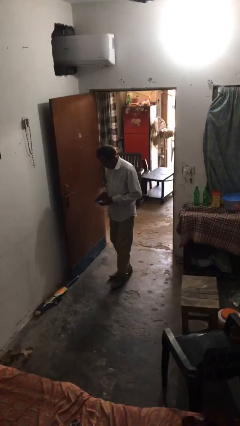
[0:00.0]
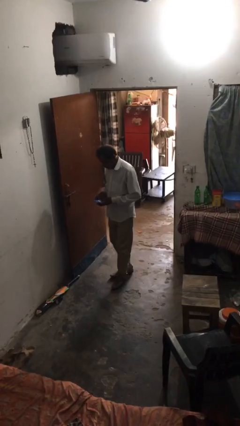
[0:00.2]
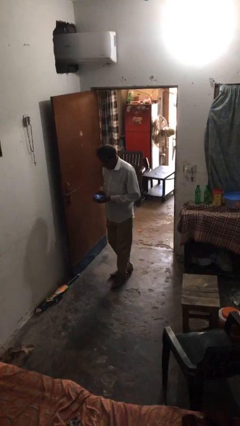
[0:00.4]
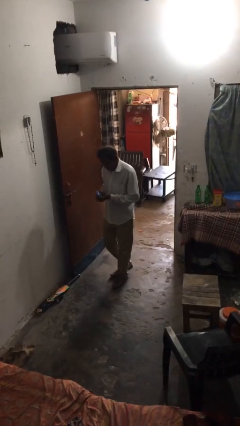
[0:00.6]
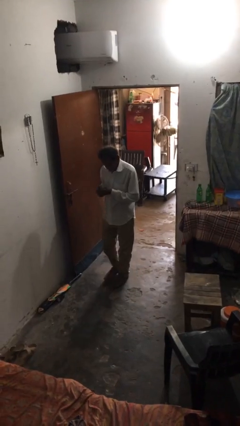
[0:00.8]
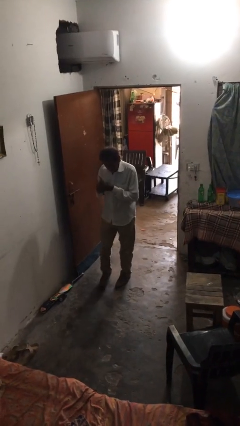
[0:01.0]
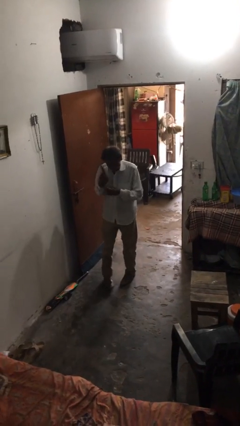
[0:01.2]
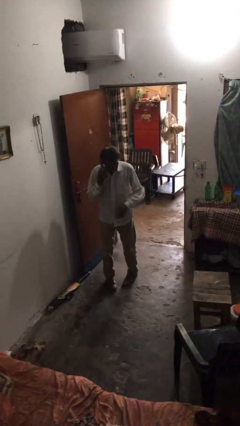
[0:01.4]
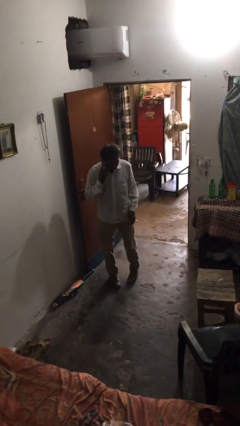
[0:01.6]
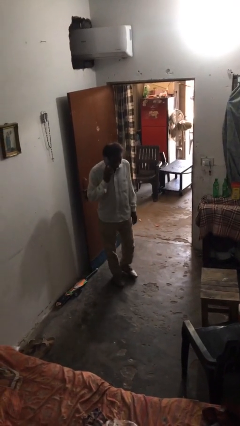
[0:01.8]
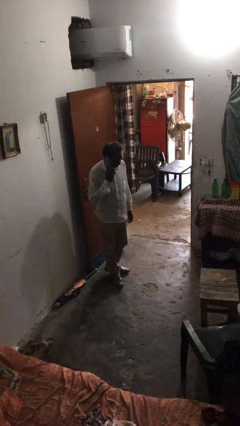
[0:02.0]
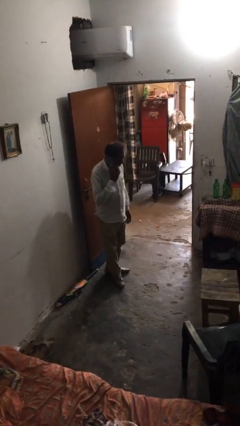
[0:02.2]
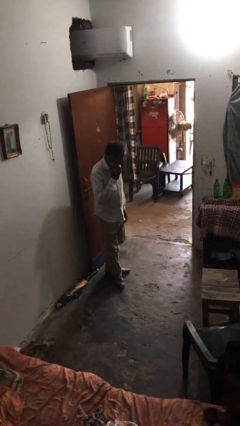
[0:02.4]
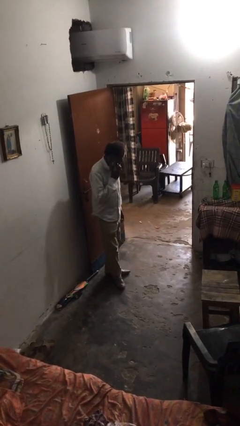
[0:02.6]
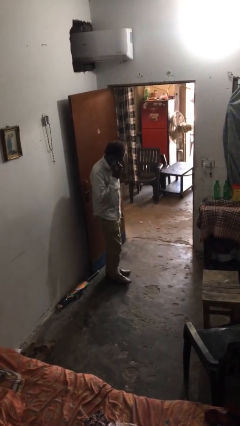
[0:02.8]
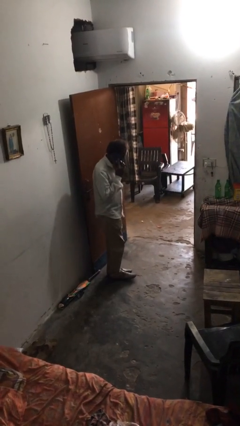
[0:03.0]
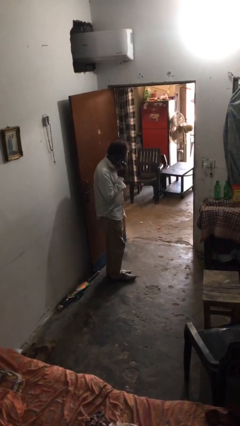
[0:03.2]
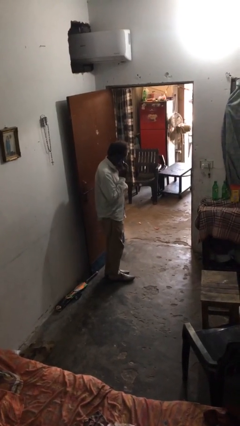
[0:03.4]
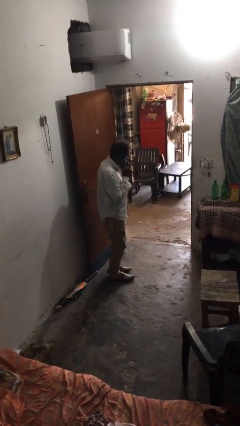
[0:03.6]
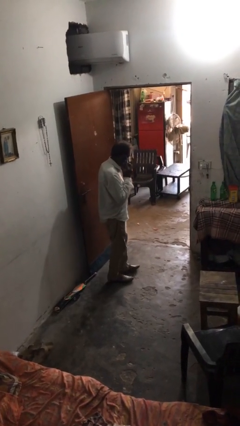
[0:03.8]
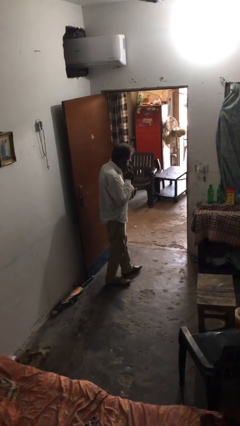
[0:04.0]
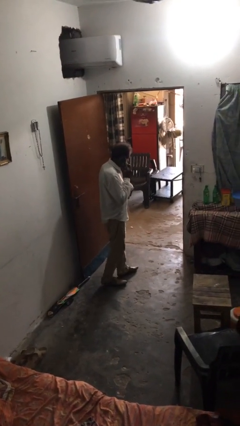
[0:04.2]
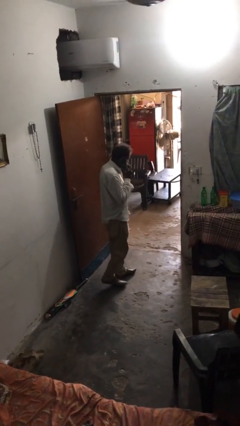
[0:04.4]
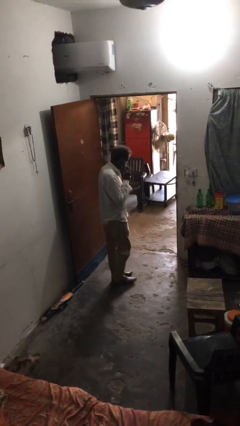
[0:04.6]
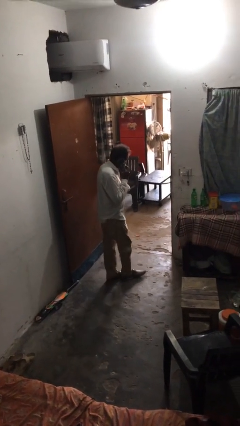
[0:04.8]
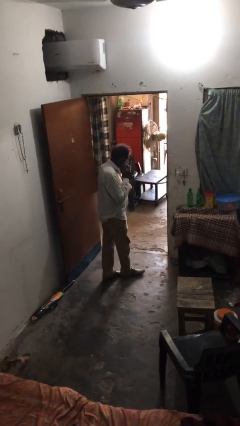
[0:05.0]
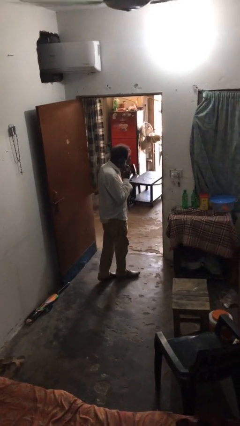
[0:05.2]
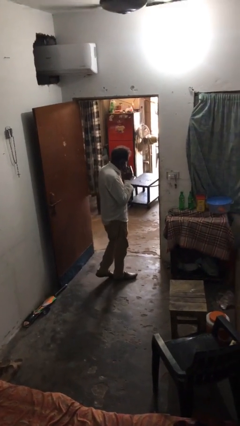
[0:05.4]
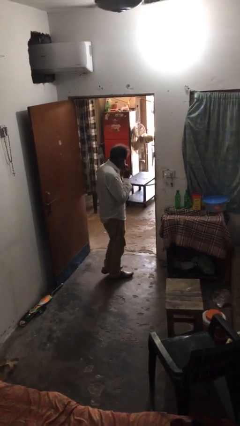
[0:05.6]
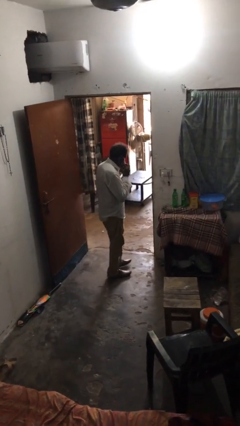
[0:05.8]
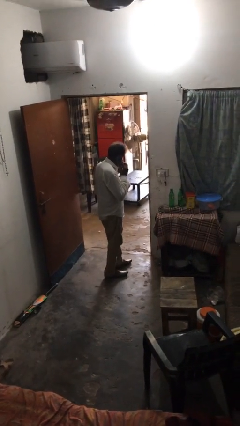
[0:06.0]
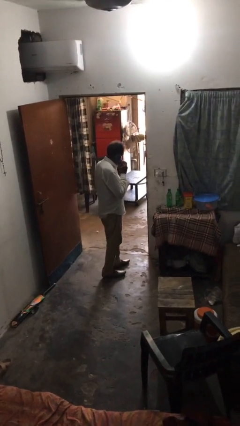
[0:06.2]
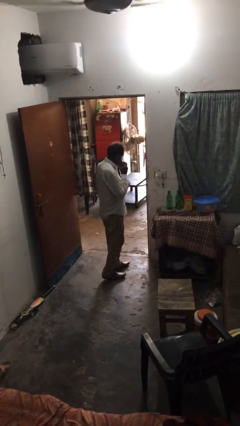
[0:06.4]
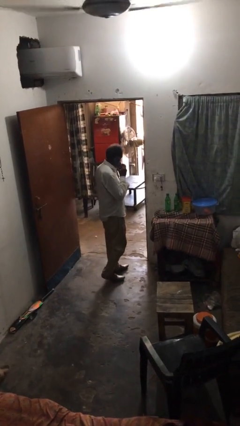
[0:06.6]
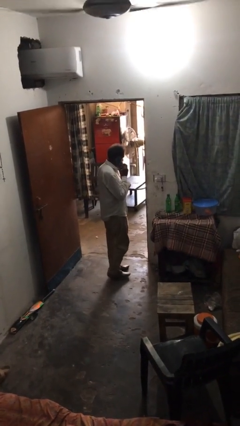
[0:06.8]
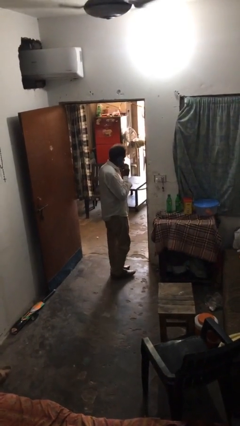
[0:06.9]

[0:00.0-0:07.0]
person talks on phone

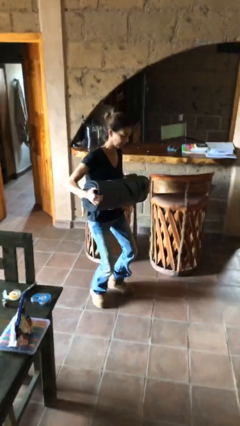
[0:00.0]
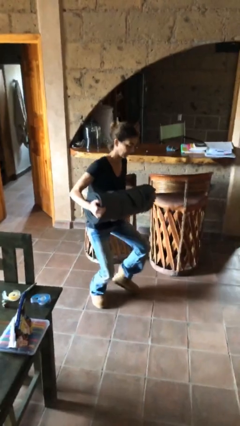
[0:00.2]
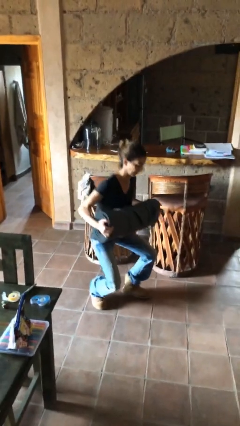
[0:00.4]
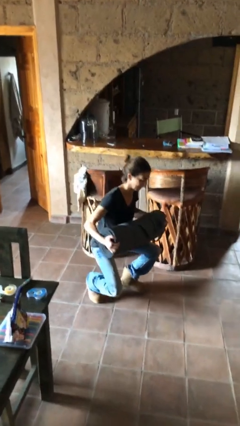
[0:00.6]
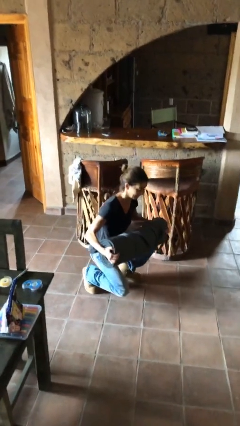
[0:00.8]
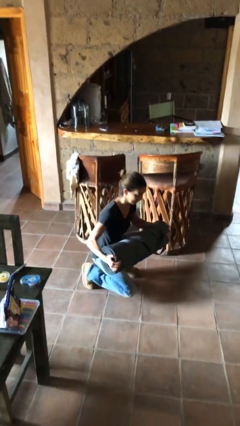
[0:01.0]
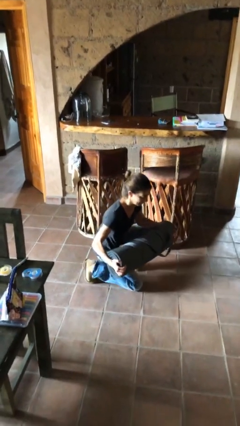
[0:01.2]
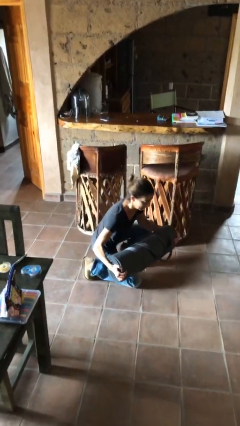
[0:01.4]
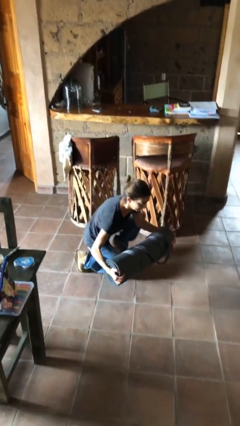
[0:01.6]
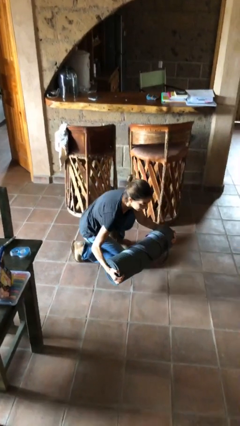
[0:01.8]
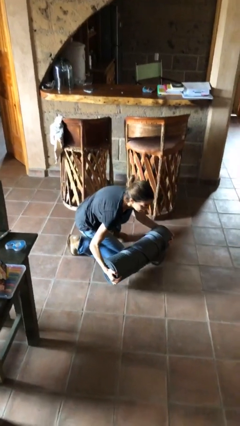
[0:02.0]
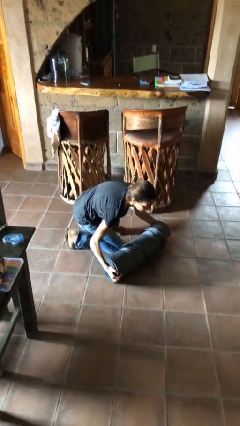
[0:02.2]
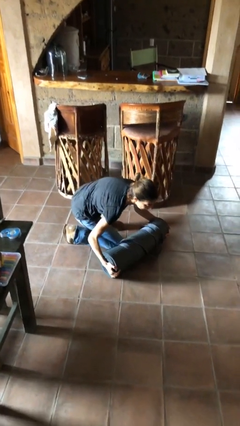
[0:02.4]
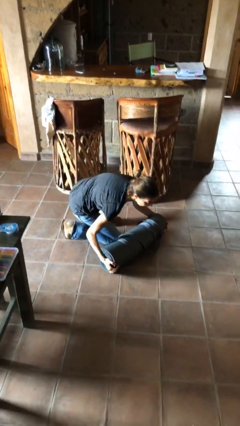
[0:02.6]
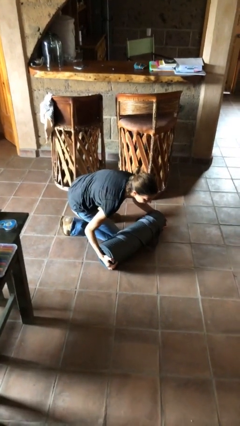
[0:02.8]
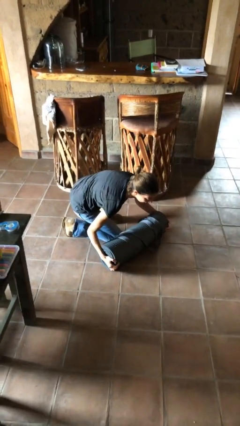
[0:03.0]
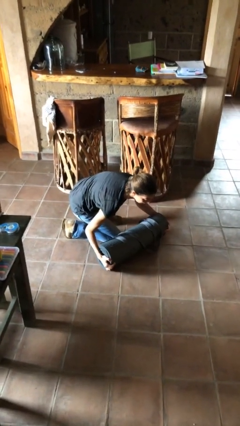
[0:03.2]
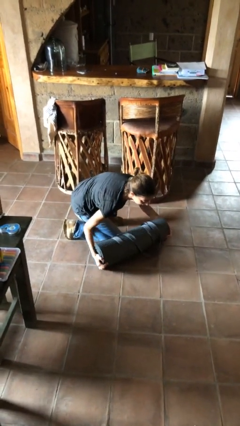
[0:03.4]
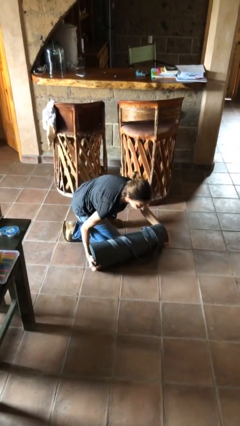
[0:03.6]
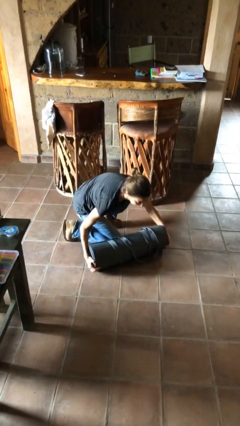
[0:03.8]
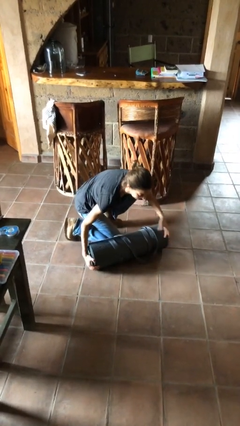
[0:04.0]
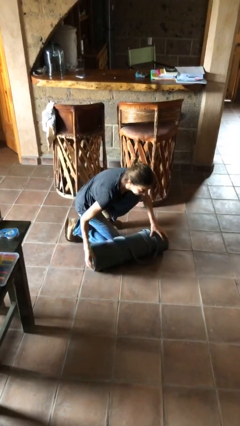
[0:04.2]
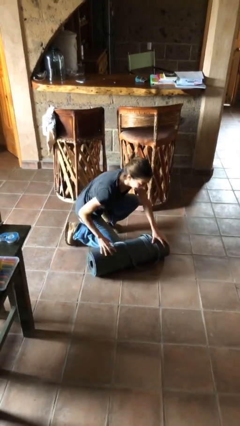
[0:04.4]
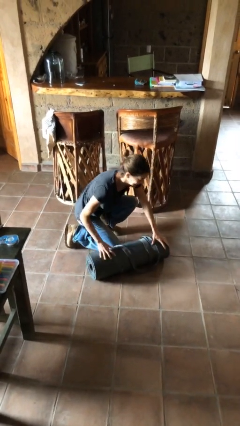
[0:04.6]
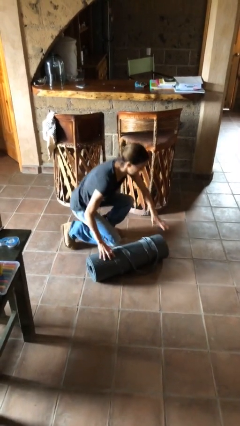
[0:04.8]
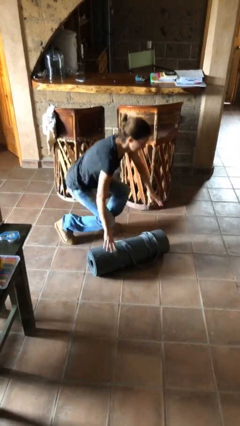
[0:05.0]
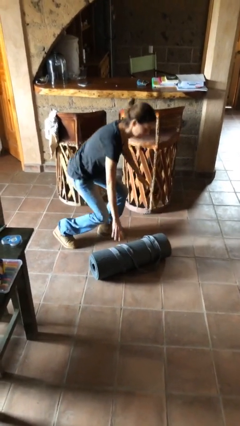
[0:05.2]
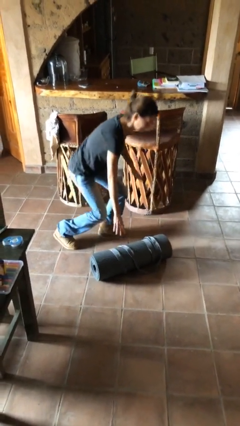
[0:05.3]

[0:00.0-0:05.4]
person puts down object on floor

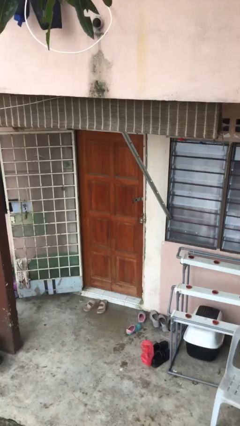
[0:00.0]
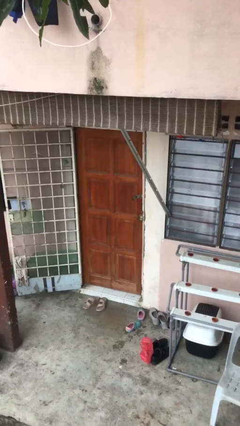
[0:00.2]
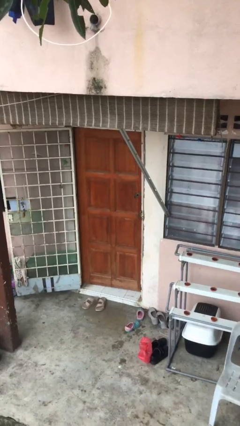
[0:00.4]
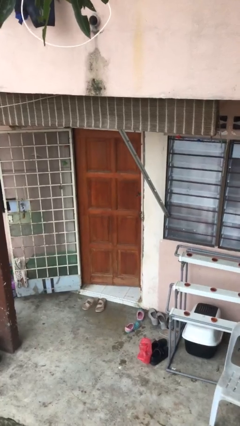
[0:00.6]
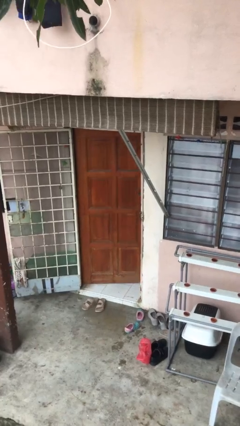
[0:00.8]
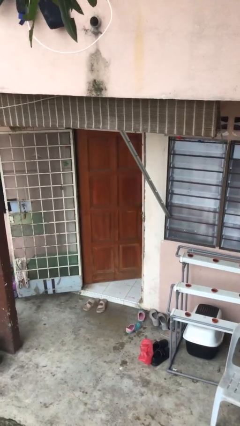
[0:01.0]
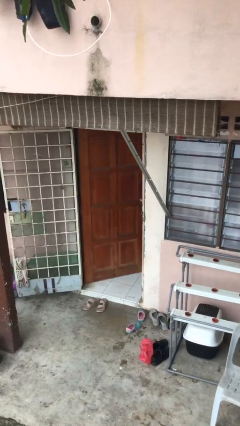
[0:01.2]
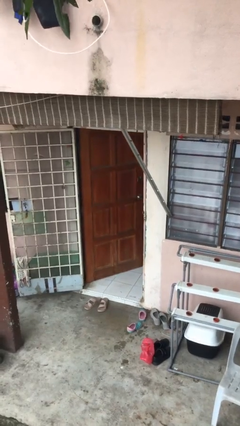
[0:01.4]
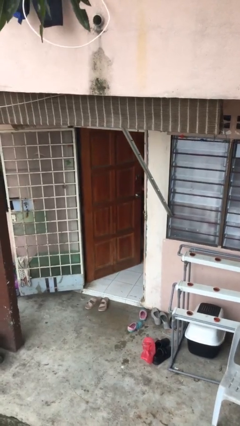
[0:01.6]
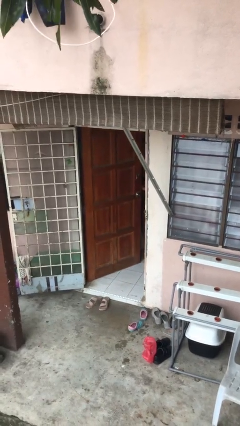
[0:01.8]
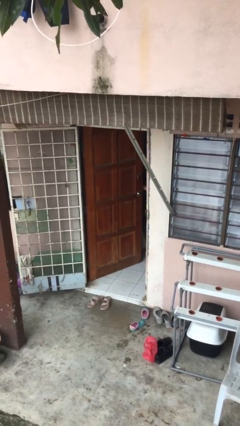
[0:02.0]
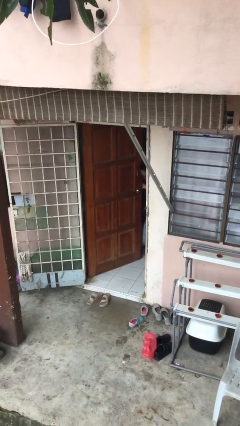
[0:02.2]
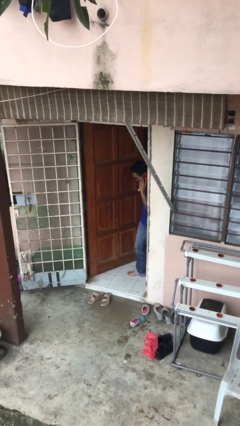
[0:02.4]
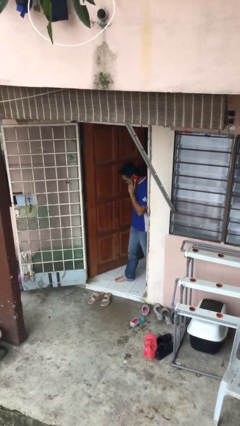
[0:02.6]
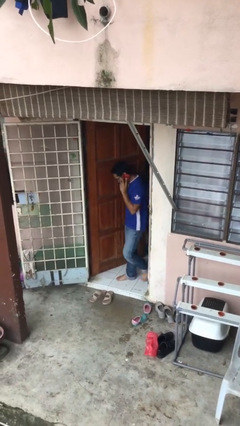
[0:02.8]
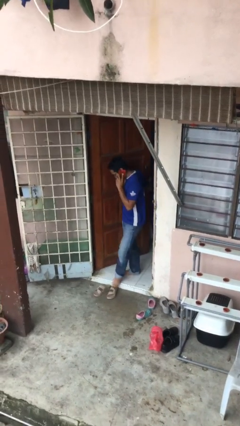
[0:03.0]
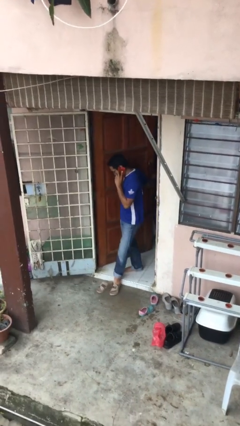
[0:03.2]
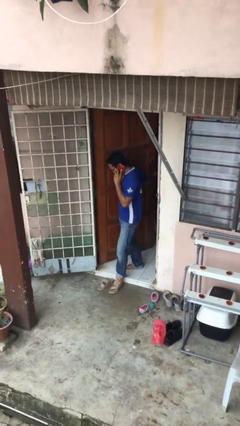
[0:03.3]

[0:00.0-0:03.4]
person opens facility door

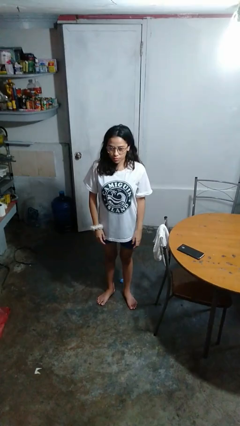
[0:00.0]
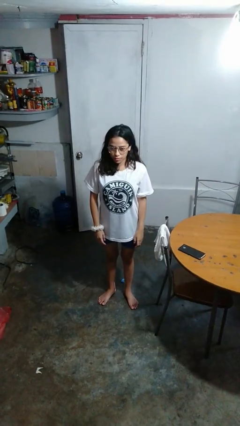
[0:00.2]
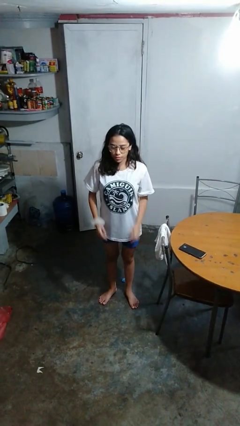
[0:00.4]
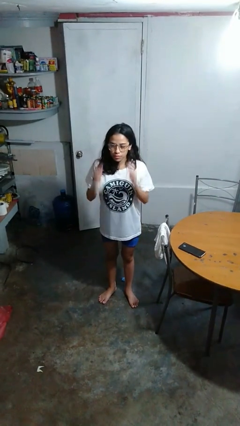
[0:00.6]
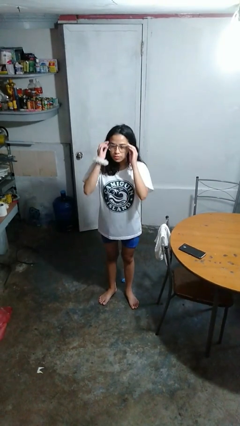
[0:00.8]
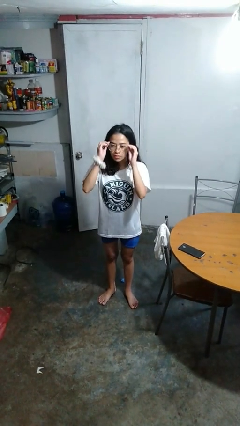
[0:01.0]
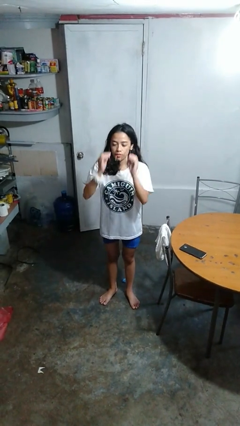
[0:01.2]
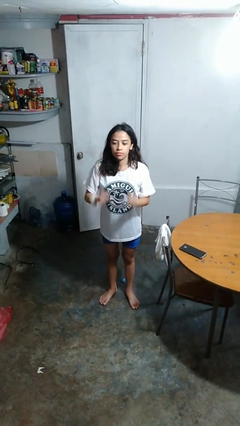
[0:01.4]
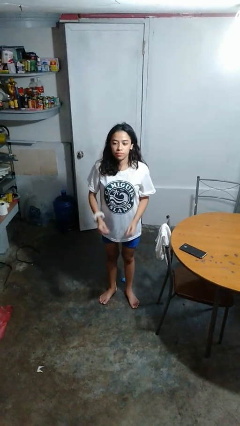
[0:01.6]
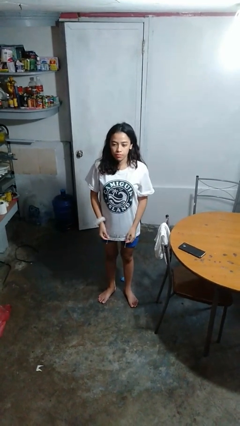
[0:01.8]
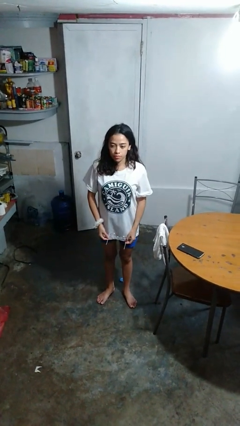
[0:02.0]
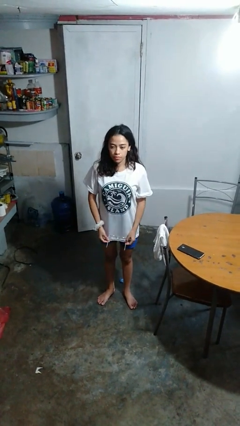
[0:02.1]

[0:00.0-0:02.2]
person takes off glasses
